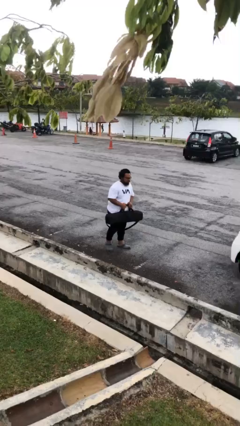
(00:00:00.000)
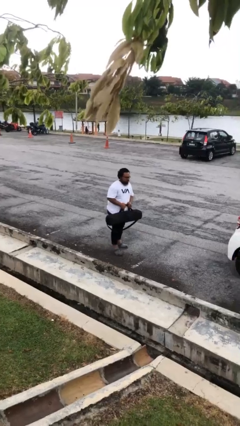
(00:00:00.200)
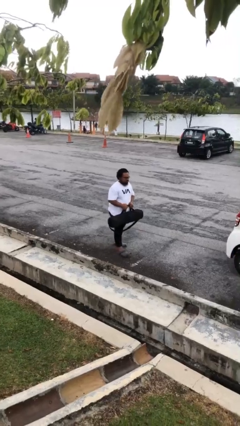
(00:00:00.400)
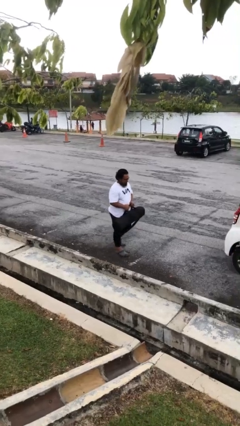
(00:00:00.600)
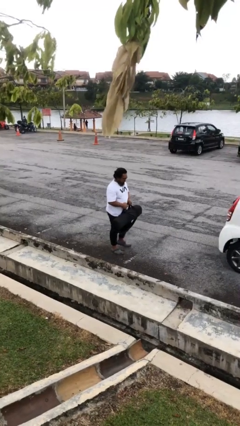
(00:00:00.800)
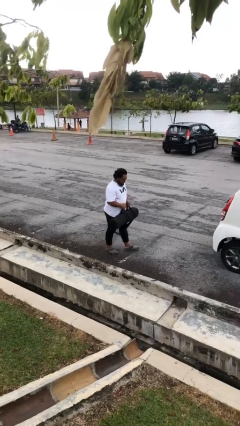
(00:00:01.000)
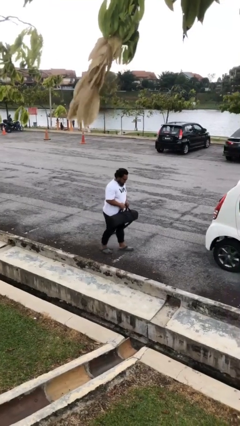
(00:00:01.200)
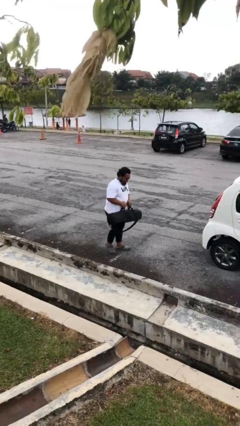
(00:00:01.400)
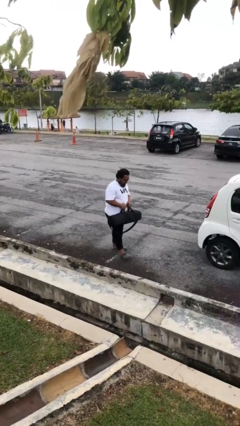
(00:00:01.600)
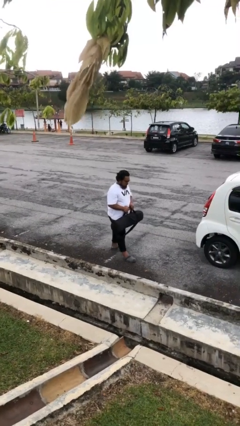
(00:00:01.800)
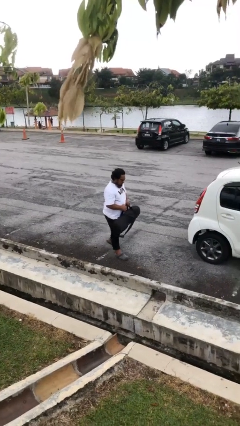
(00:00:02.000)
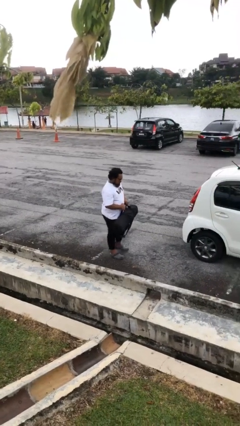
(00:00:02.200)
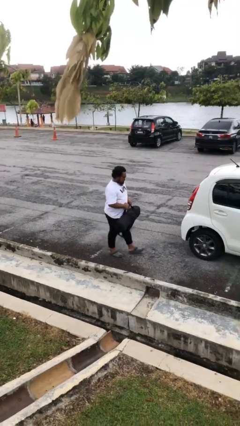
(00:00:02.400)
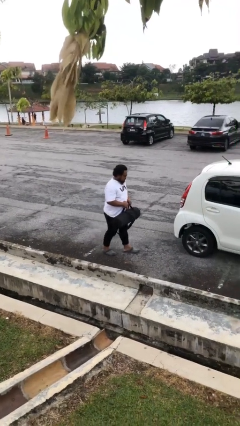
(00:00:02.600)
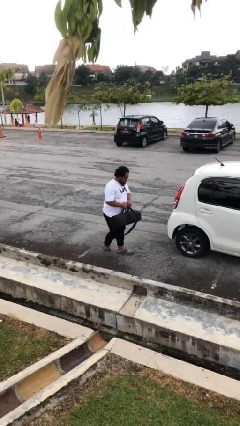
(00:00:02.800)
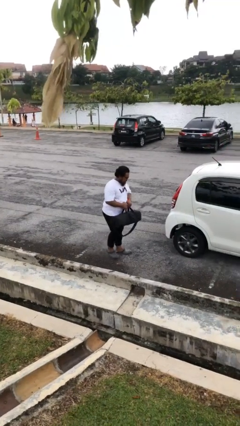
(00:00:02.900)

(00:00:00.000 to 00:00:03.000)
person carries heavy object

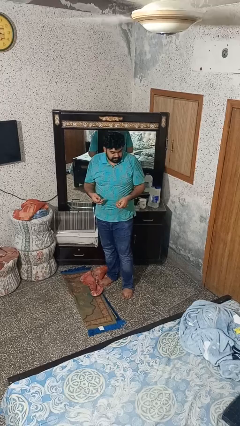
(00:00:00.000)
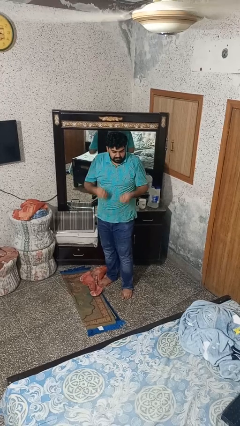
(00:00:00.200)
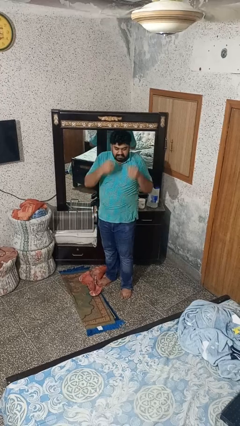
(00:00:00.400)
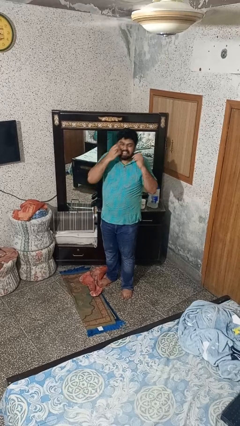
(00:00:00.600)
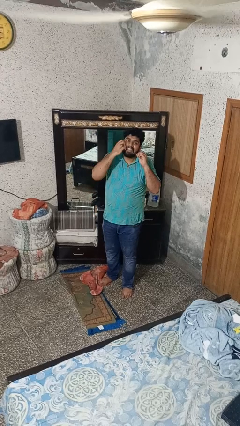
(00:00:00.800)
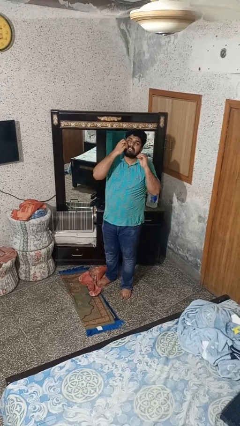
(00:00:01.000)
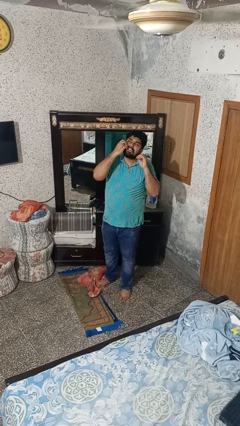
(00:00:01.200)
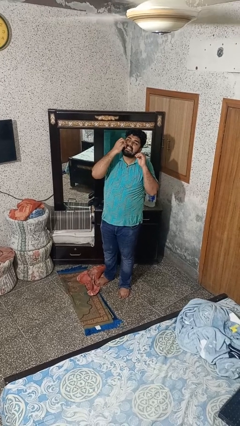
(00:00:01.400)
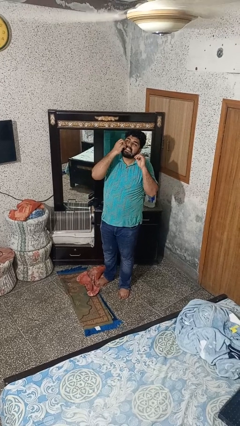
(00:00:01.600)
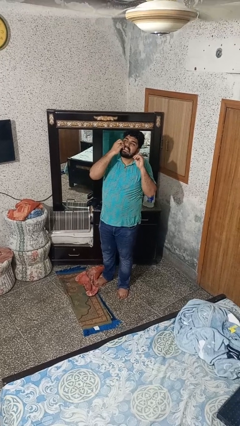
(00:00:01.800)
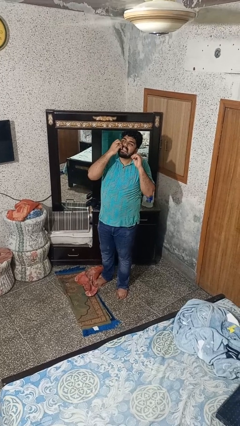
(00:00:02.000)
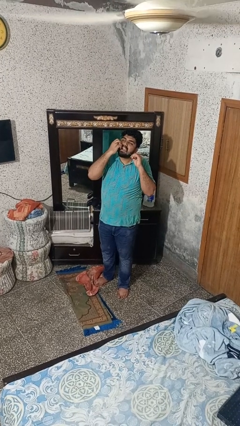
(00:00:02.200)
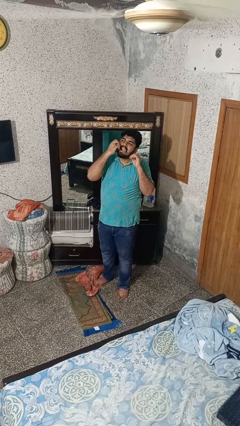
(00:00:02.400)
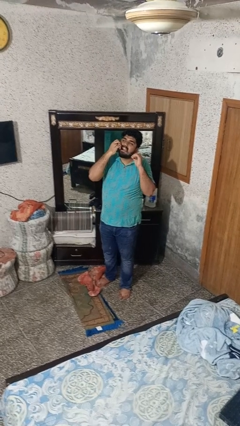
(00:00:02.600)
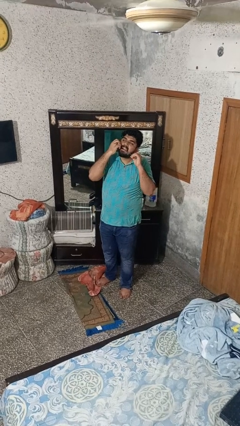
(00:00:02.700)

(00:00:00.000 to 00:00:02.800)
person flosses

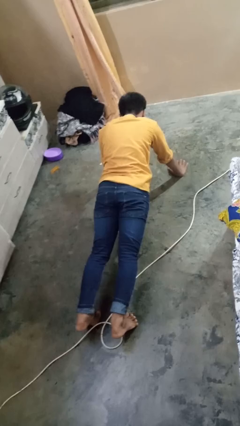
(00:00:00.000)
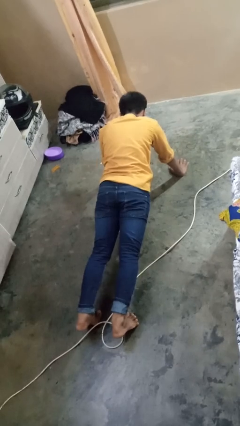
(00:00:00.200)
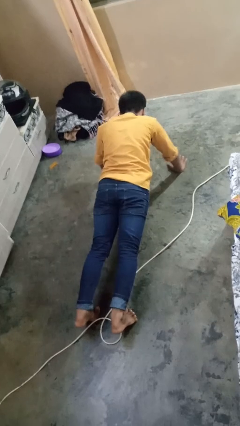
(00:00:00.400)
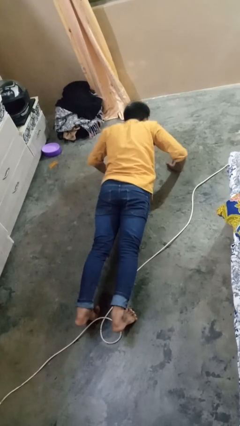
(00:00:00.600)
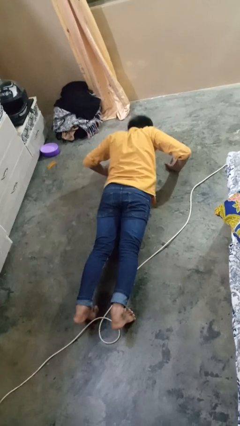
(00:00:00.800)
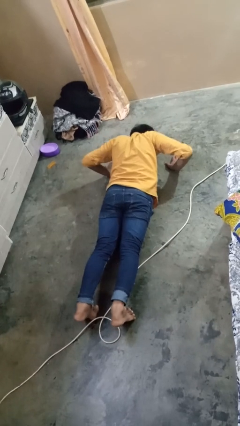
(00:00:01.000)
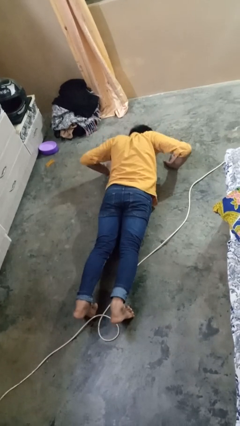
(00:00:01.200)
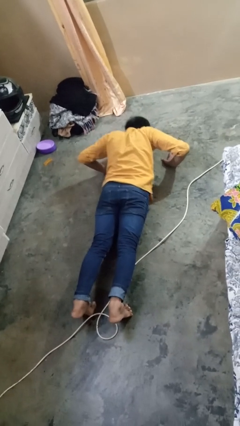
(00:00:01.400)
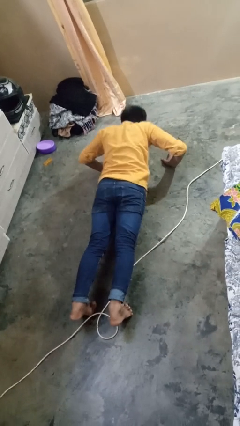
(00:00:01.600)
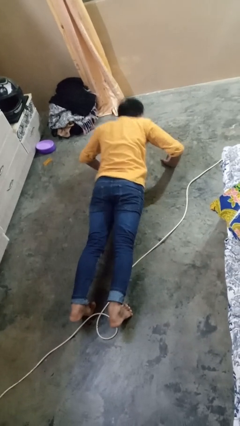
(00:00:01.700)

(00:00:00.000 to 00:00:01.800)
person exercises with pushup

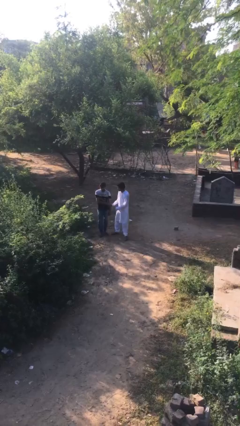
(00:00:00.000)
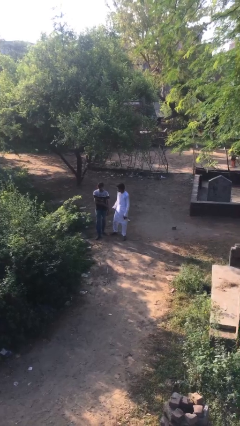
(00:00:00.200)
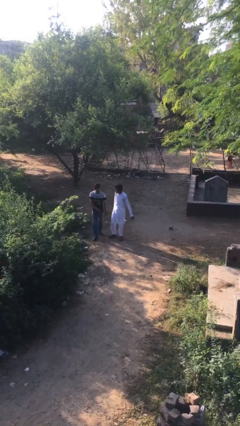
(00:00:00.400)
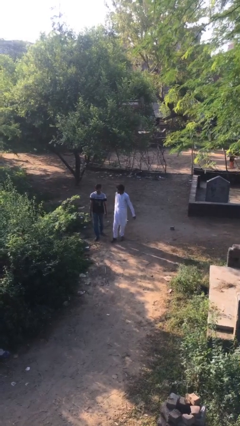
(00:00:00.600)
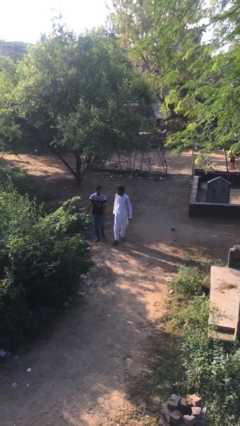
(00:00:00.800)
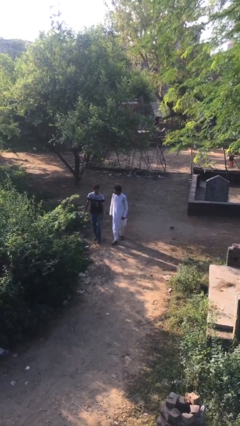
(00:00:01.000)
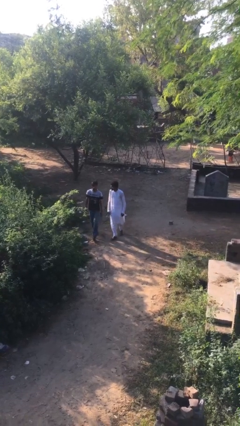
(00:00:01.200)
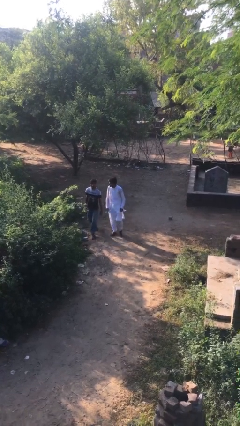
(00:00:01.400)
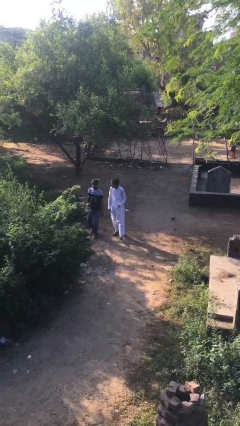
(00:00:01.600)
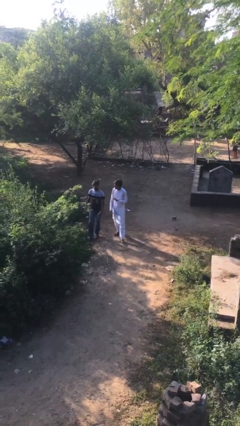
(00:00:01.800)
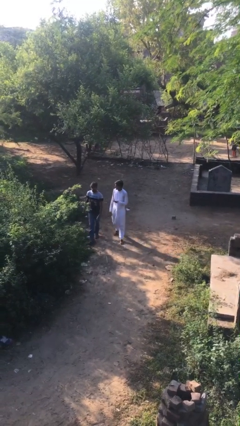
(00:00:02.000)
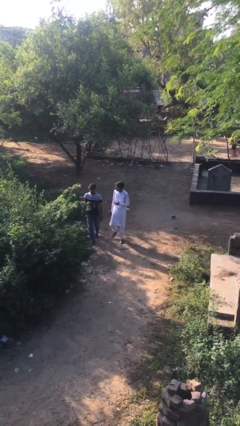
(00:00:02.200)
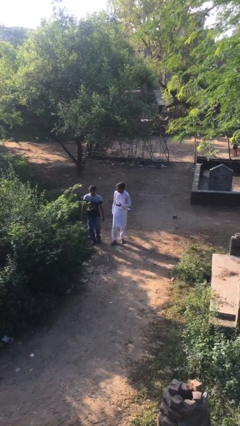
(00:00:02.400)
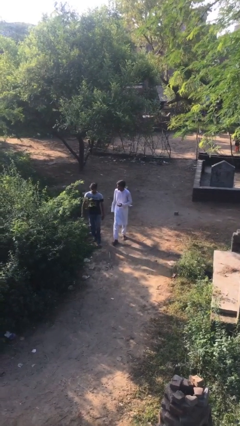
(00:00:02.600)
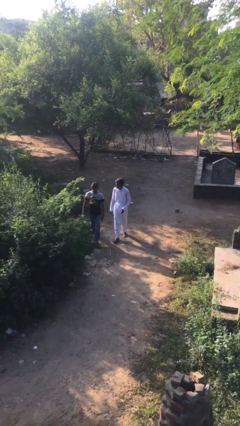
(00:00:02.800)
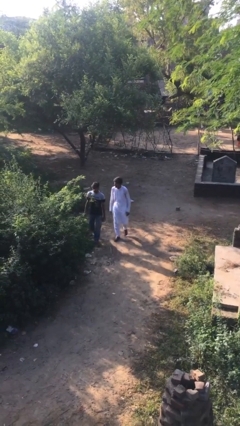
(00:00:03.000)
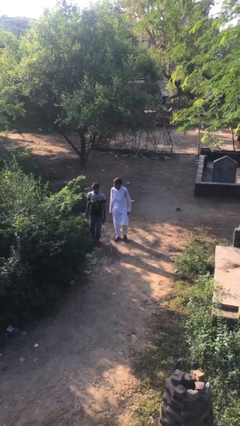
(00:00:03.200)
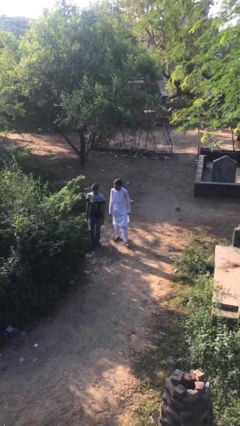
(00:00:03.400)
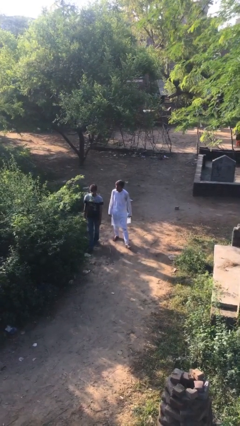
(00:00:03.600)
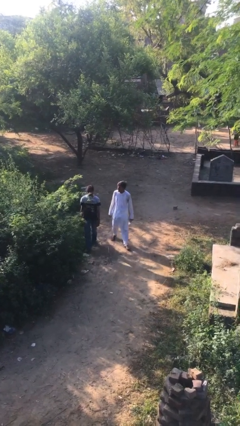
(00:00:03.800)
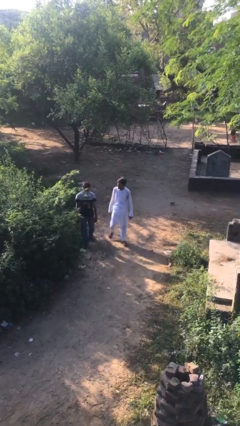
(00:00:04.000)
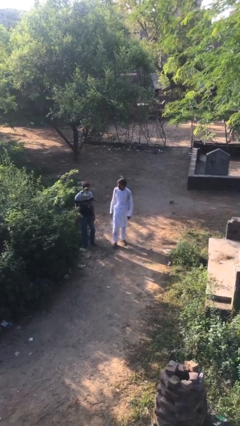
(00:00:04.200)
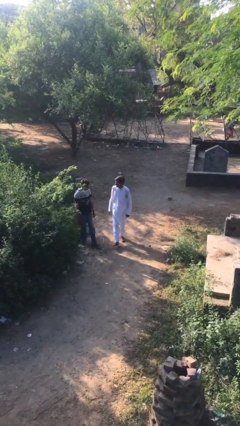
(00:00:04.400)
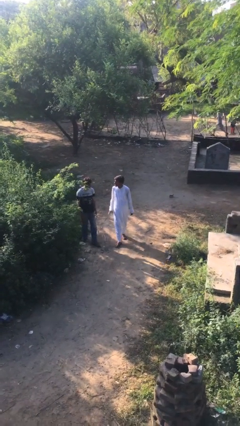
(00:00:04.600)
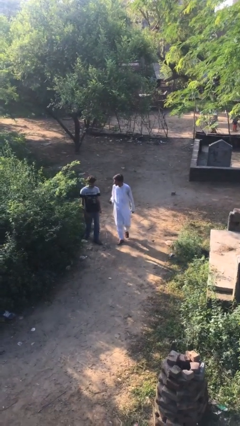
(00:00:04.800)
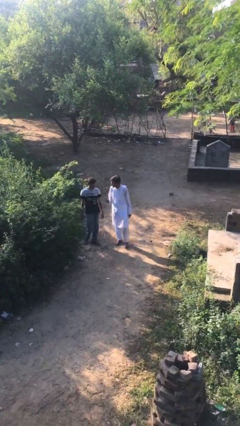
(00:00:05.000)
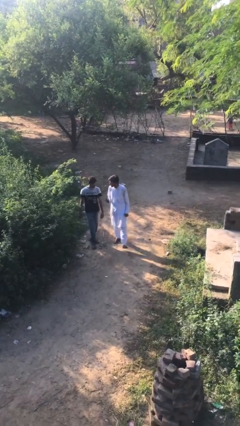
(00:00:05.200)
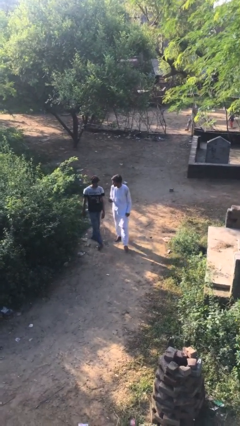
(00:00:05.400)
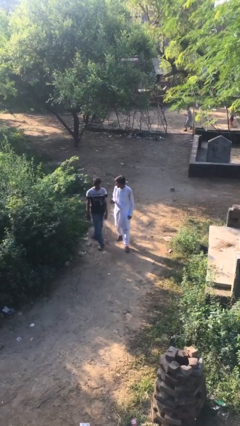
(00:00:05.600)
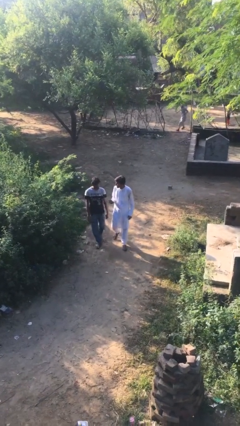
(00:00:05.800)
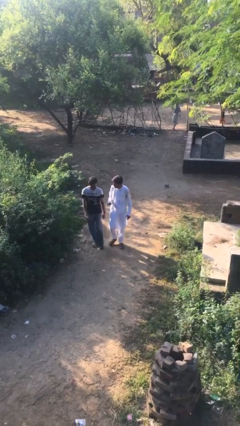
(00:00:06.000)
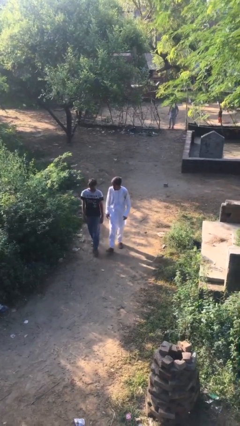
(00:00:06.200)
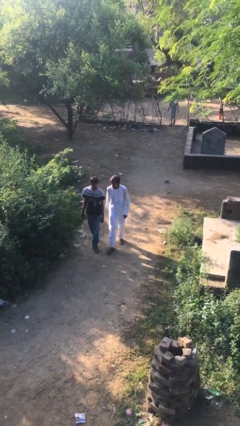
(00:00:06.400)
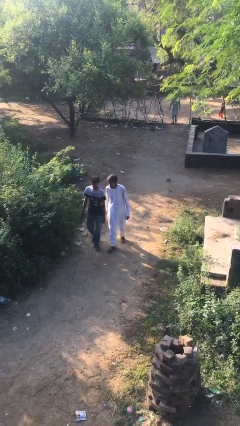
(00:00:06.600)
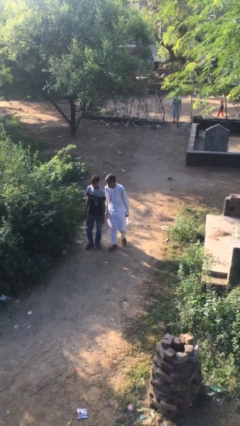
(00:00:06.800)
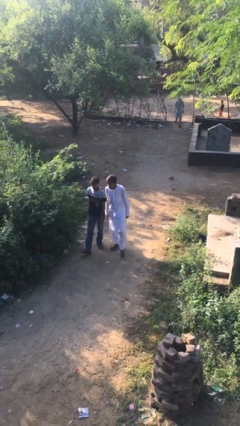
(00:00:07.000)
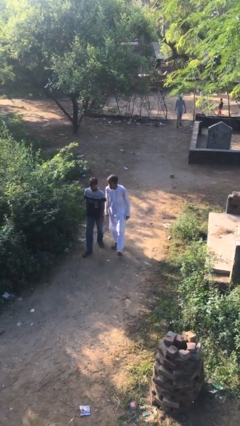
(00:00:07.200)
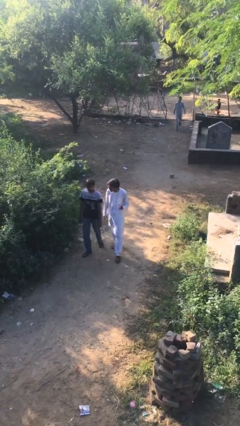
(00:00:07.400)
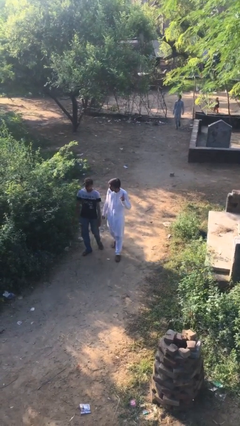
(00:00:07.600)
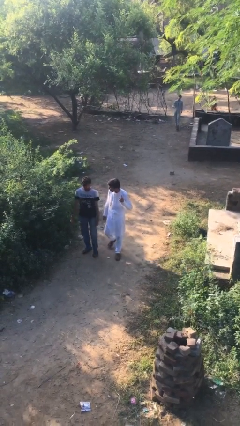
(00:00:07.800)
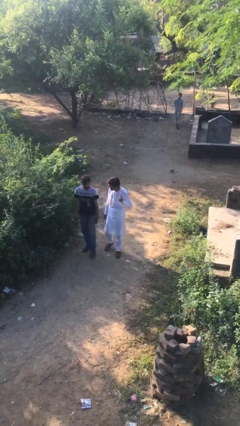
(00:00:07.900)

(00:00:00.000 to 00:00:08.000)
person talks to person

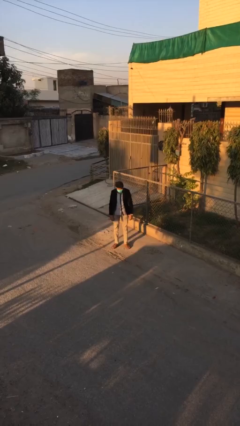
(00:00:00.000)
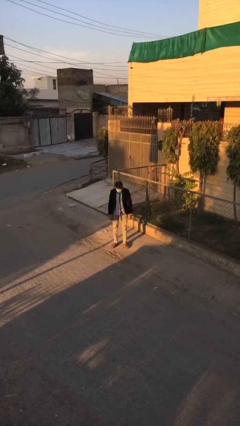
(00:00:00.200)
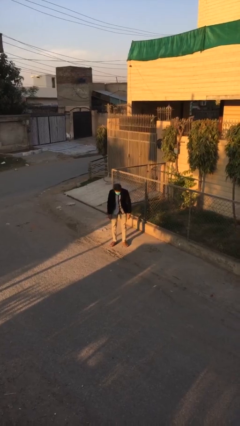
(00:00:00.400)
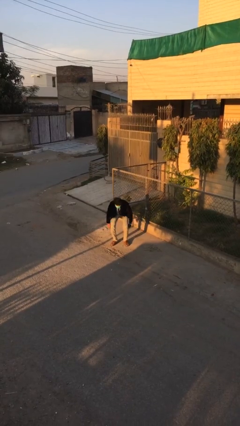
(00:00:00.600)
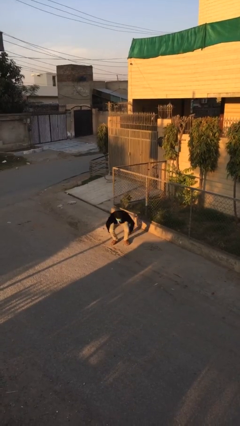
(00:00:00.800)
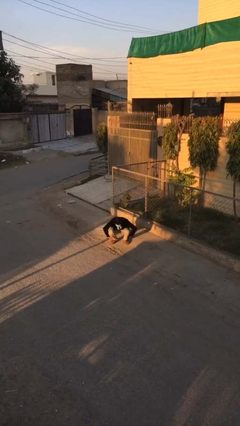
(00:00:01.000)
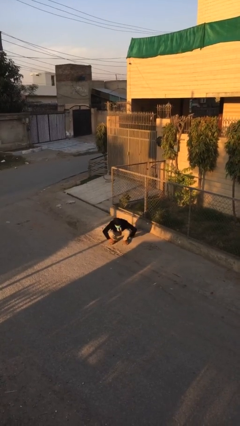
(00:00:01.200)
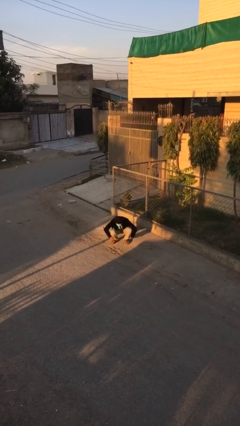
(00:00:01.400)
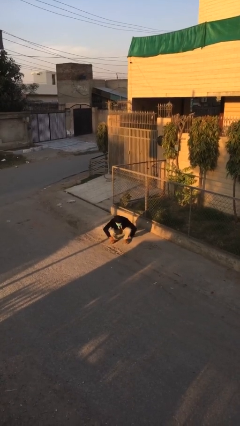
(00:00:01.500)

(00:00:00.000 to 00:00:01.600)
person sits down
